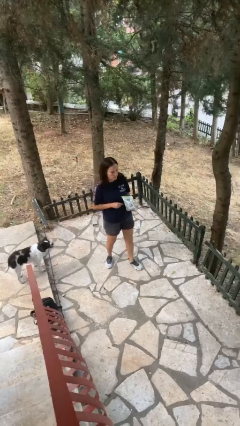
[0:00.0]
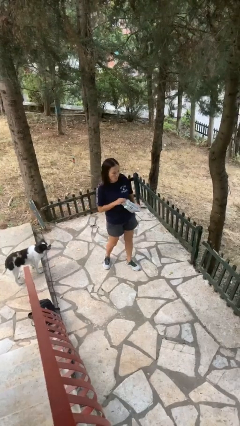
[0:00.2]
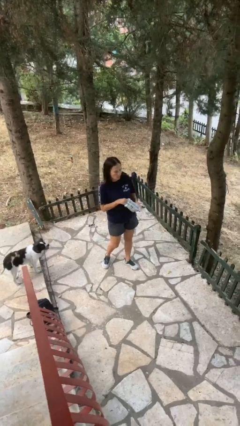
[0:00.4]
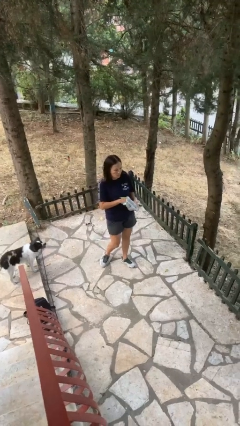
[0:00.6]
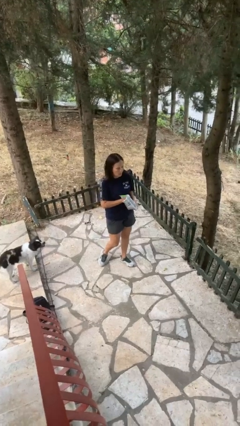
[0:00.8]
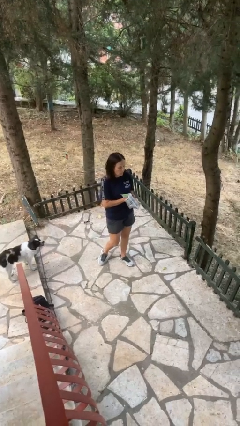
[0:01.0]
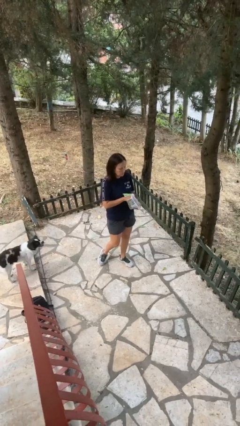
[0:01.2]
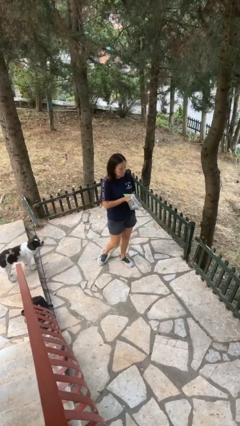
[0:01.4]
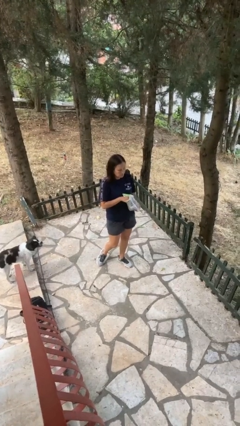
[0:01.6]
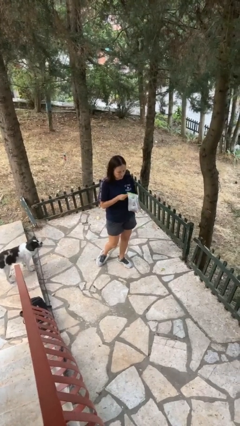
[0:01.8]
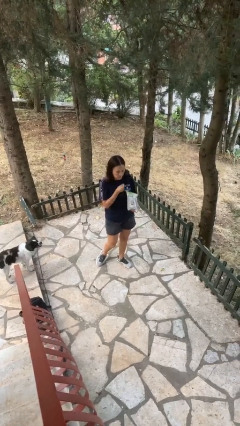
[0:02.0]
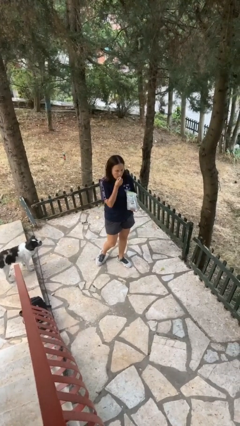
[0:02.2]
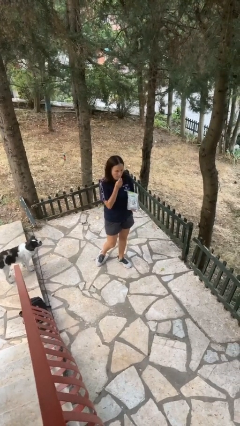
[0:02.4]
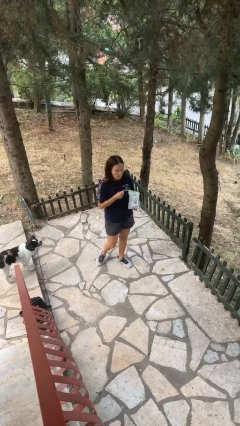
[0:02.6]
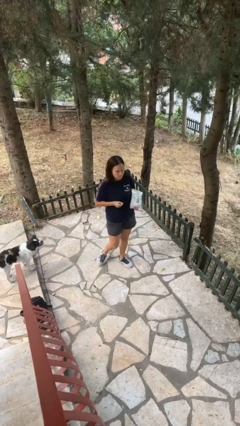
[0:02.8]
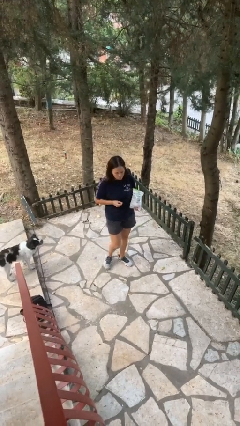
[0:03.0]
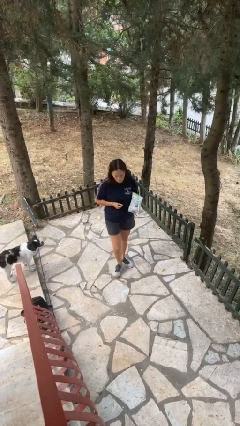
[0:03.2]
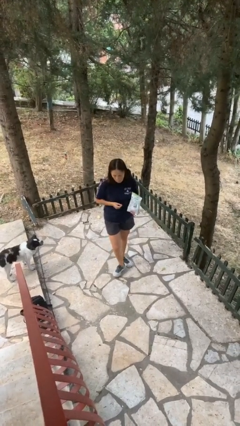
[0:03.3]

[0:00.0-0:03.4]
person eats snack from bag

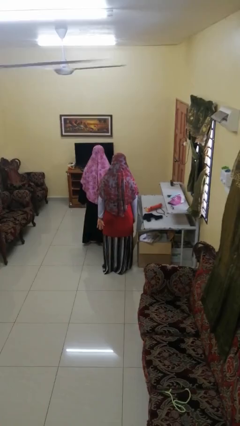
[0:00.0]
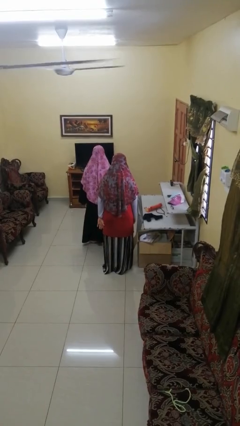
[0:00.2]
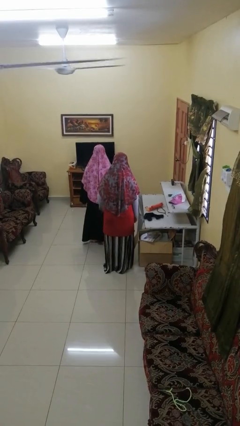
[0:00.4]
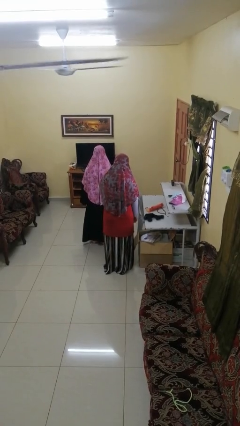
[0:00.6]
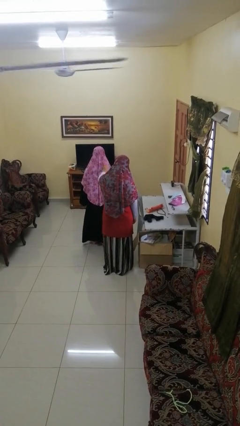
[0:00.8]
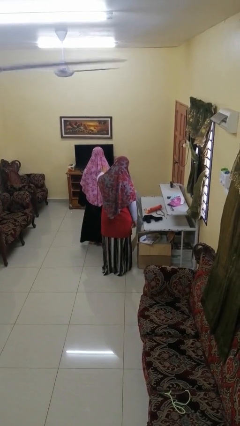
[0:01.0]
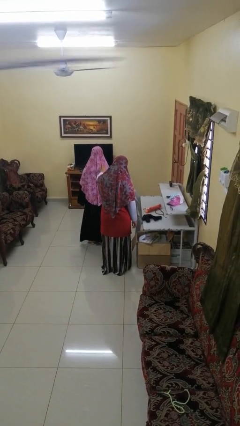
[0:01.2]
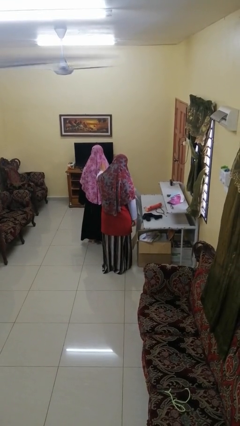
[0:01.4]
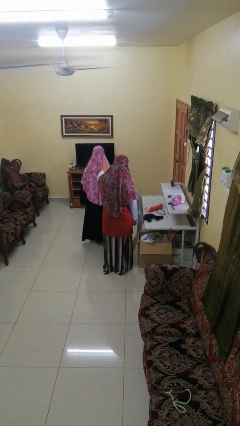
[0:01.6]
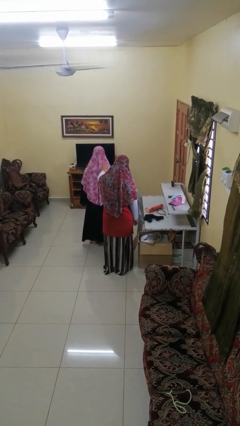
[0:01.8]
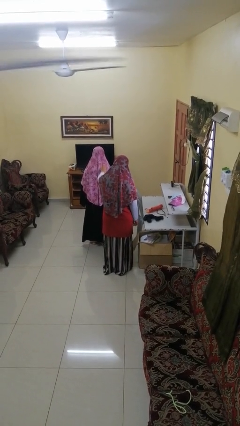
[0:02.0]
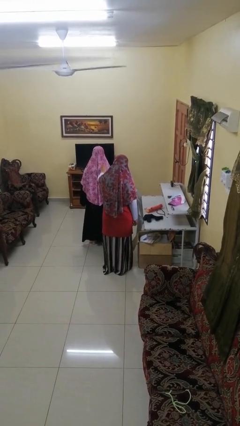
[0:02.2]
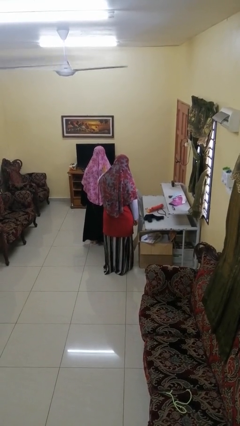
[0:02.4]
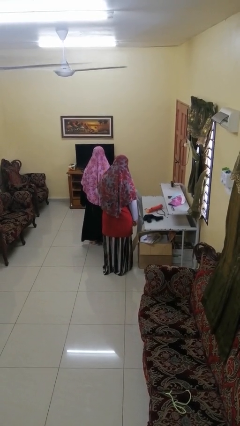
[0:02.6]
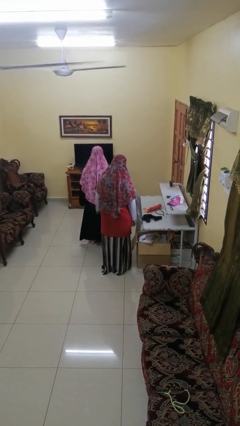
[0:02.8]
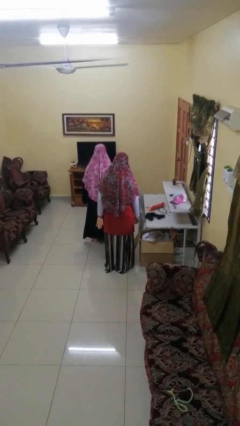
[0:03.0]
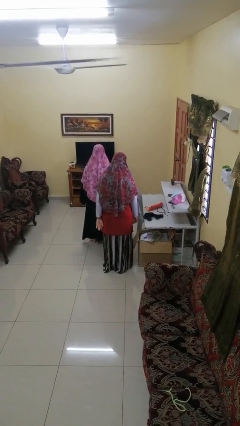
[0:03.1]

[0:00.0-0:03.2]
person touches back of person

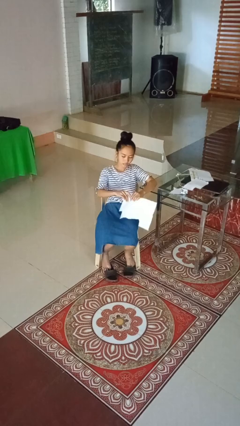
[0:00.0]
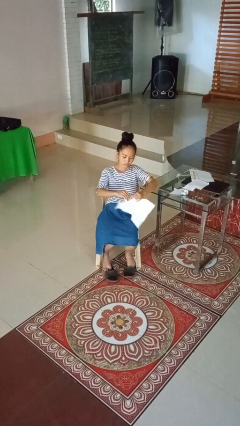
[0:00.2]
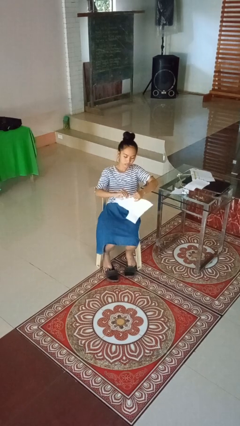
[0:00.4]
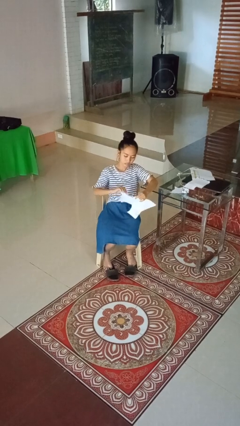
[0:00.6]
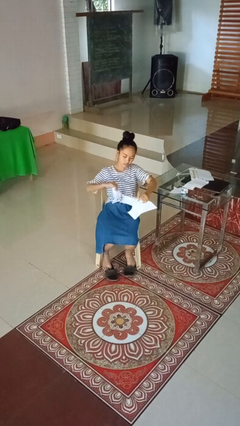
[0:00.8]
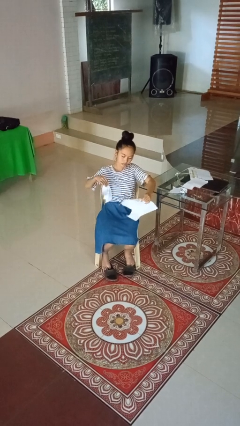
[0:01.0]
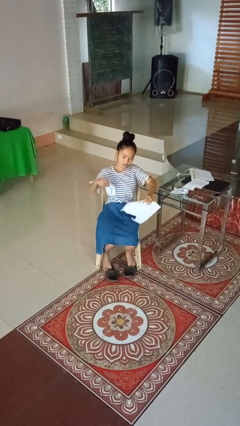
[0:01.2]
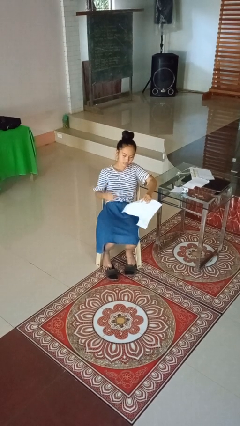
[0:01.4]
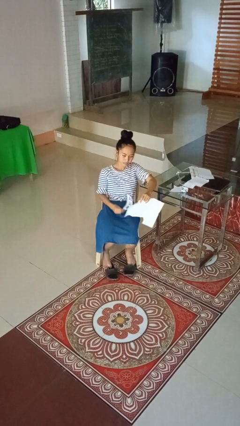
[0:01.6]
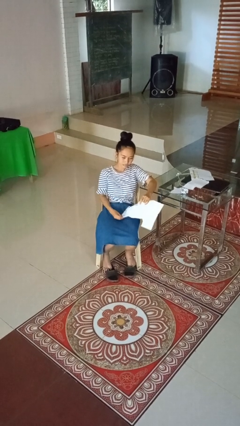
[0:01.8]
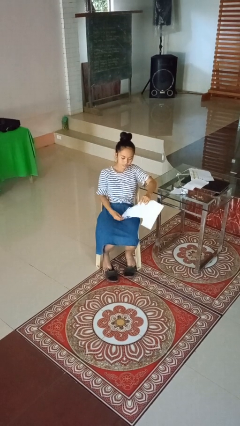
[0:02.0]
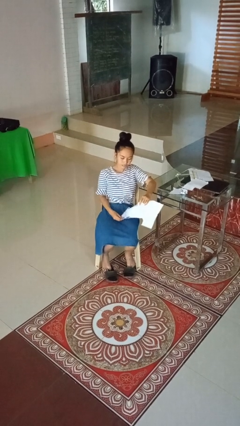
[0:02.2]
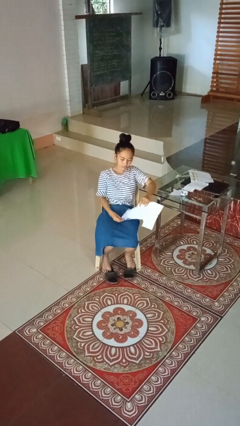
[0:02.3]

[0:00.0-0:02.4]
person tears paper

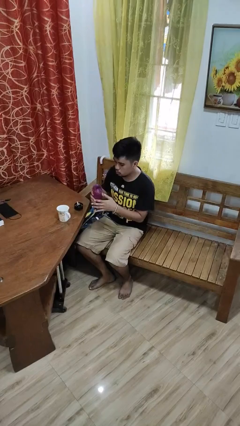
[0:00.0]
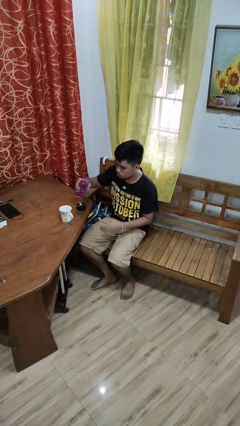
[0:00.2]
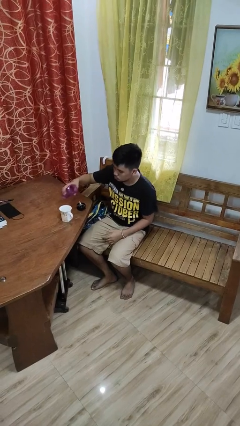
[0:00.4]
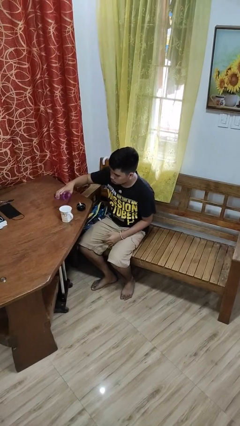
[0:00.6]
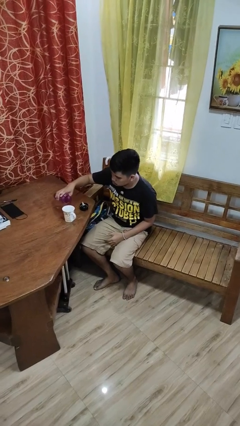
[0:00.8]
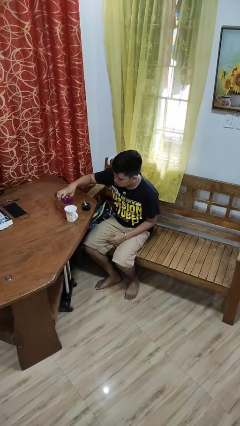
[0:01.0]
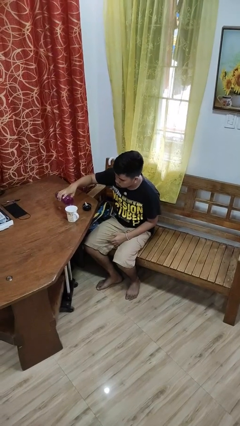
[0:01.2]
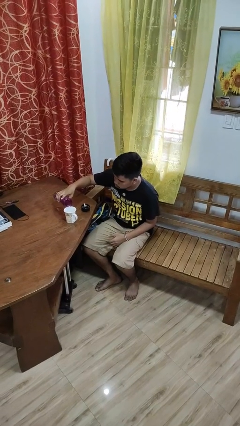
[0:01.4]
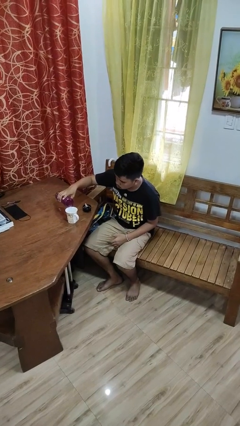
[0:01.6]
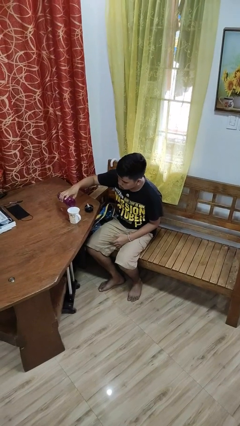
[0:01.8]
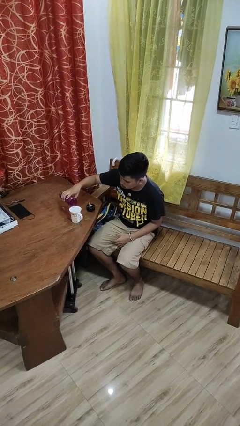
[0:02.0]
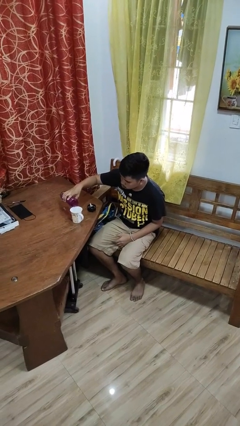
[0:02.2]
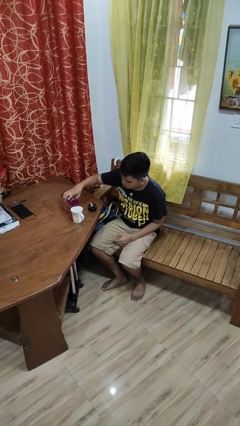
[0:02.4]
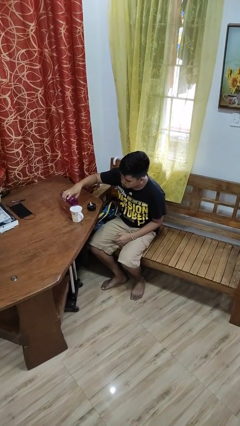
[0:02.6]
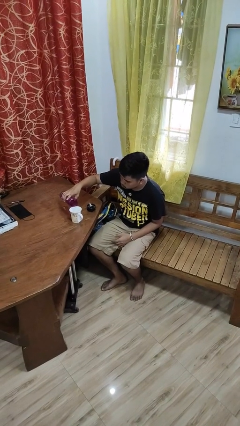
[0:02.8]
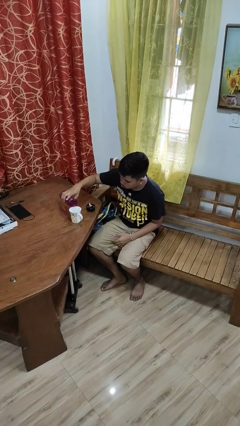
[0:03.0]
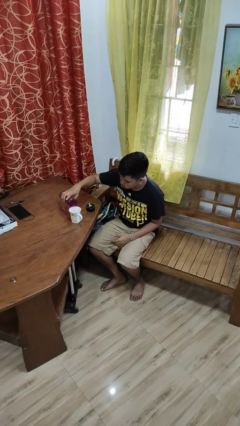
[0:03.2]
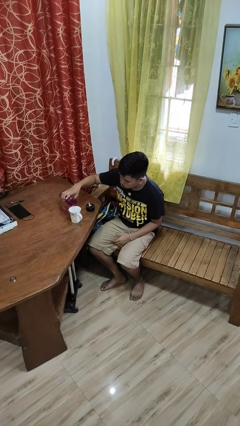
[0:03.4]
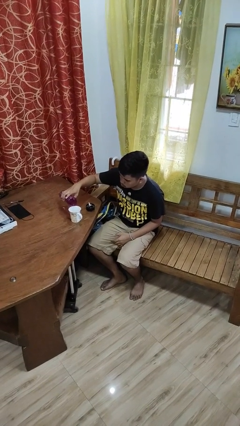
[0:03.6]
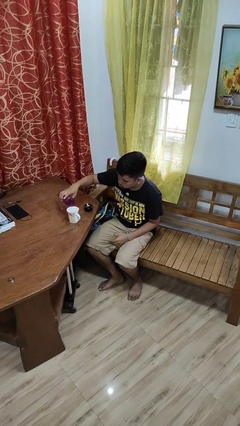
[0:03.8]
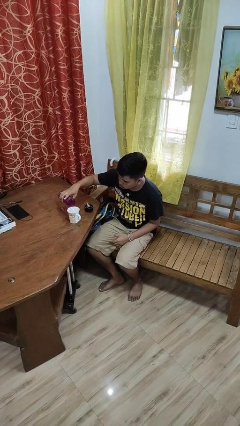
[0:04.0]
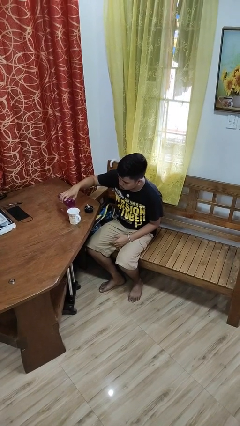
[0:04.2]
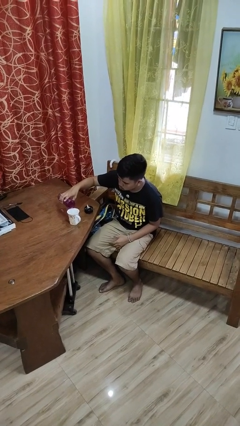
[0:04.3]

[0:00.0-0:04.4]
person pours liquid into cup

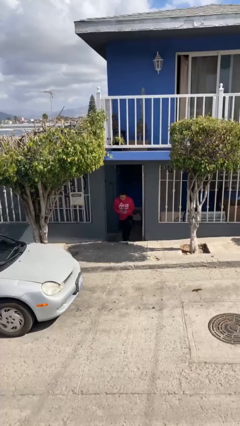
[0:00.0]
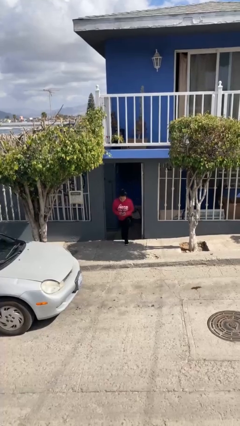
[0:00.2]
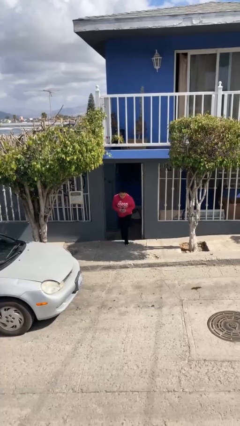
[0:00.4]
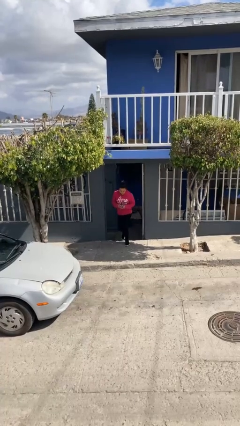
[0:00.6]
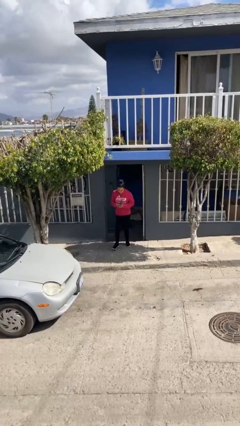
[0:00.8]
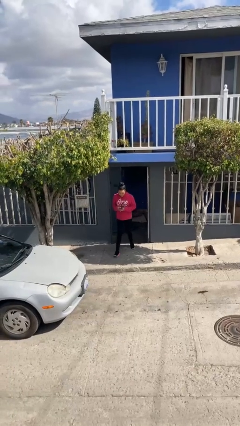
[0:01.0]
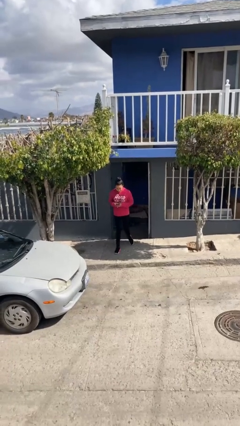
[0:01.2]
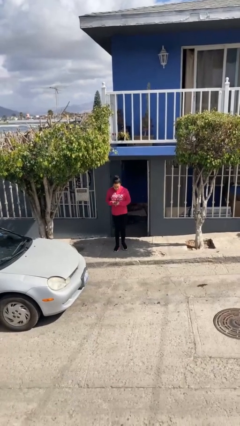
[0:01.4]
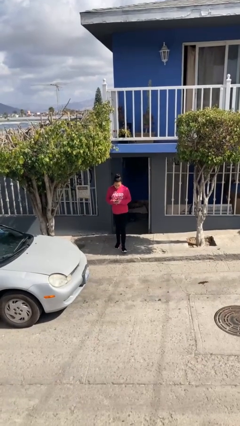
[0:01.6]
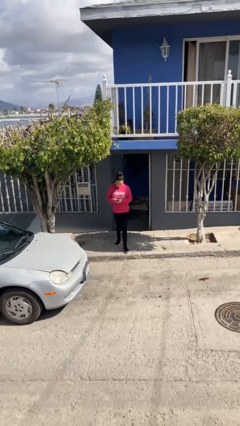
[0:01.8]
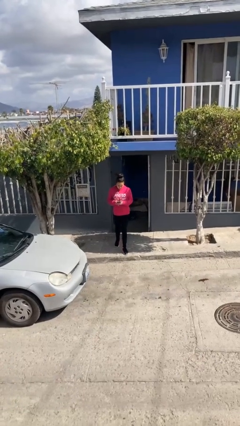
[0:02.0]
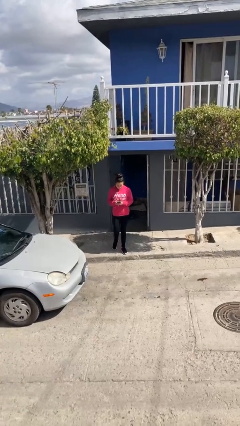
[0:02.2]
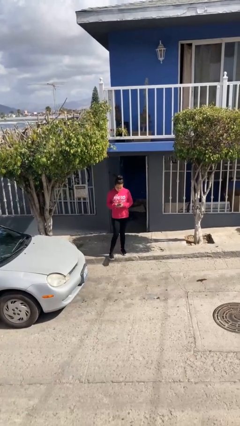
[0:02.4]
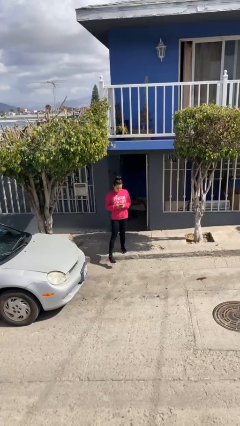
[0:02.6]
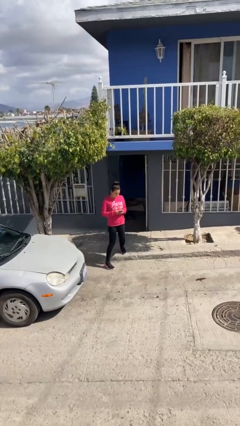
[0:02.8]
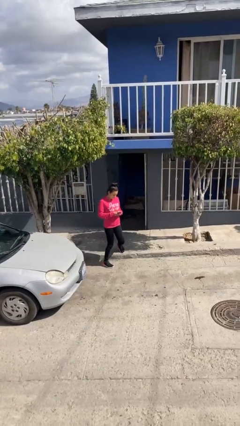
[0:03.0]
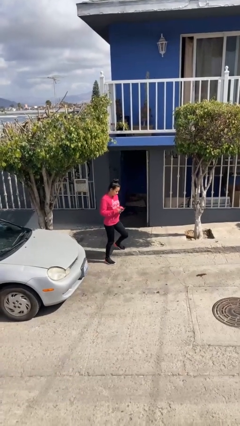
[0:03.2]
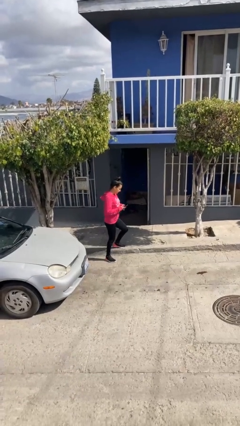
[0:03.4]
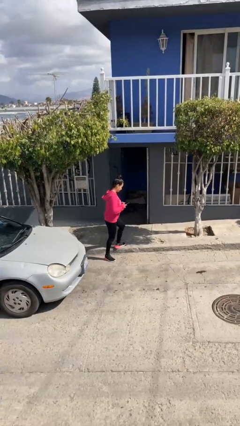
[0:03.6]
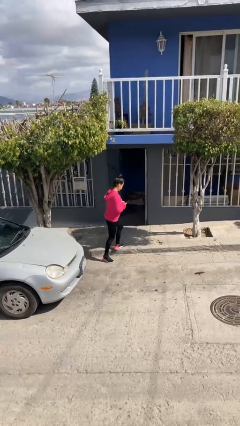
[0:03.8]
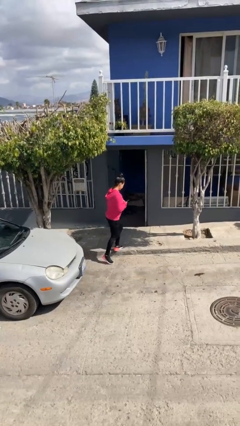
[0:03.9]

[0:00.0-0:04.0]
person enters scene through structure

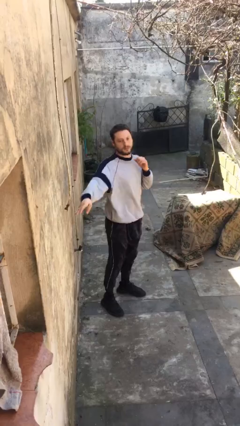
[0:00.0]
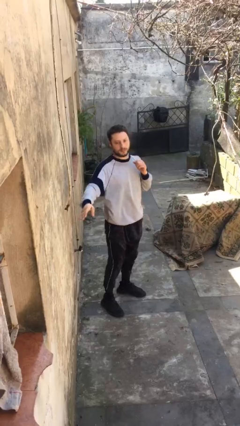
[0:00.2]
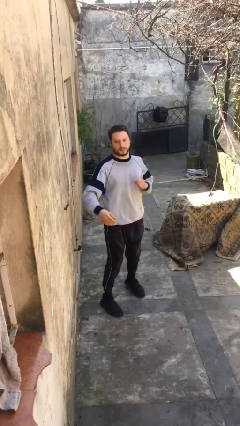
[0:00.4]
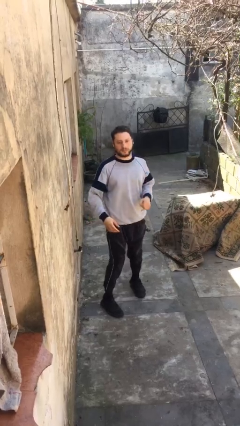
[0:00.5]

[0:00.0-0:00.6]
person karate chop
